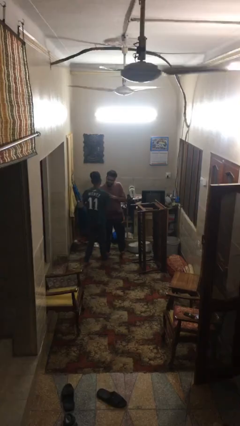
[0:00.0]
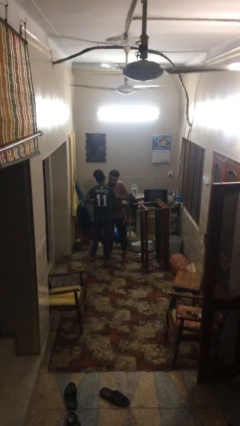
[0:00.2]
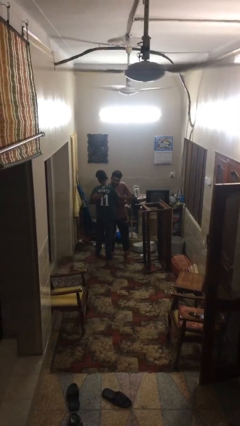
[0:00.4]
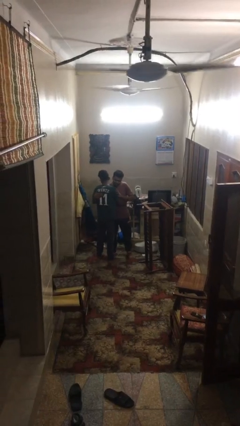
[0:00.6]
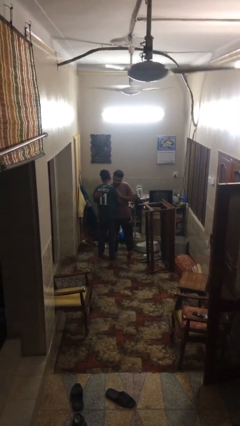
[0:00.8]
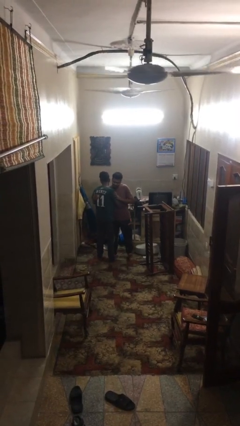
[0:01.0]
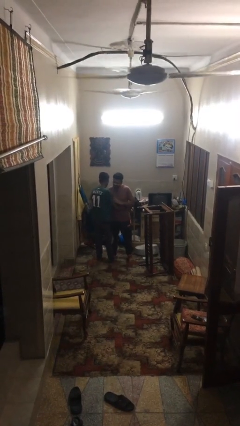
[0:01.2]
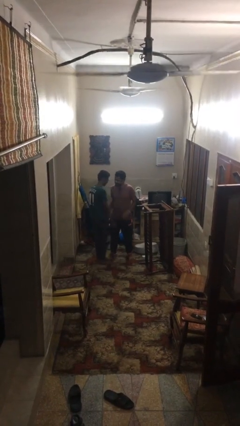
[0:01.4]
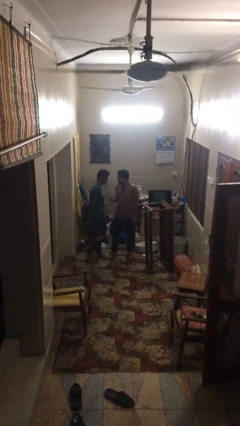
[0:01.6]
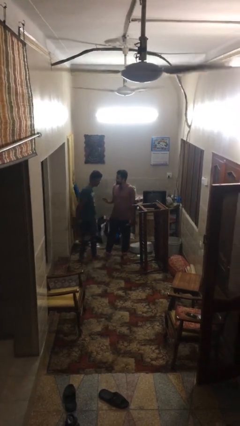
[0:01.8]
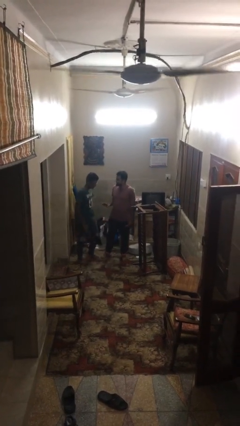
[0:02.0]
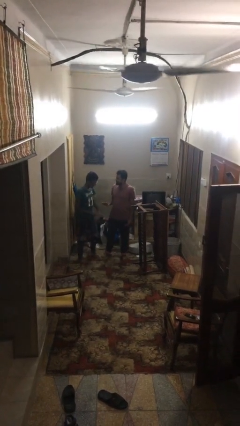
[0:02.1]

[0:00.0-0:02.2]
person embraces person

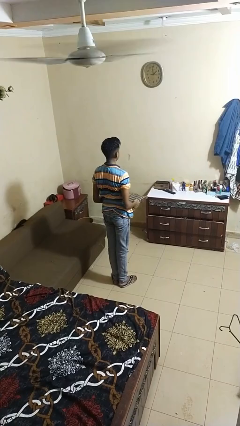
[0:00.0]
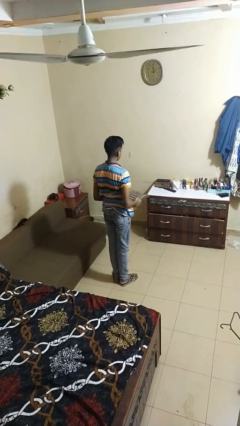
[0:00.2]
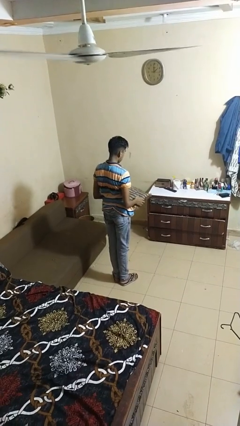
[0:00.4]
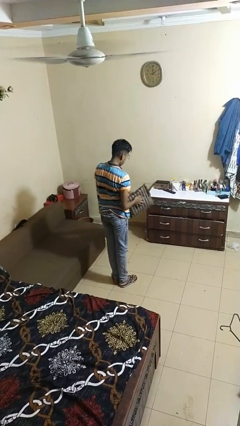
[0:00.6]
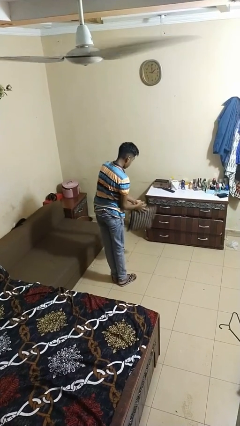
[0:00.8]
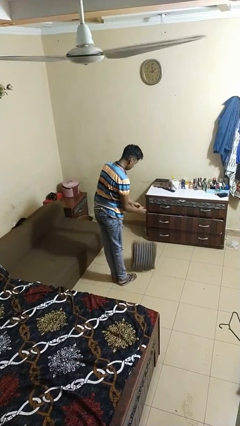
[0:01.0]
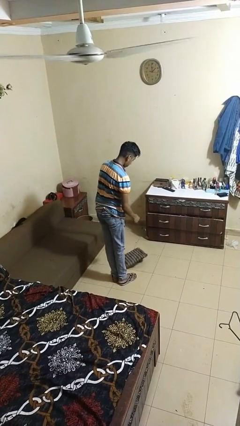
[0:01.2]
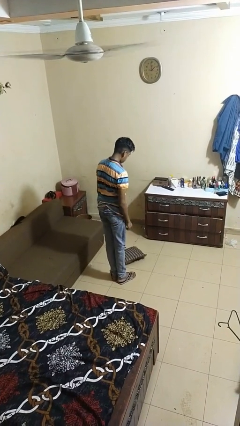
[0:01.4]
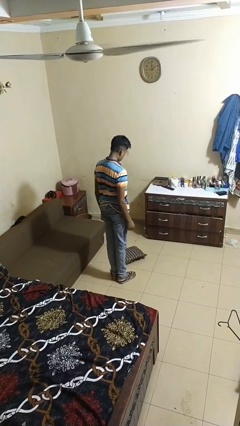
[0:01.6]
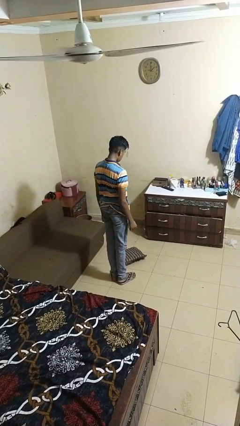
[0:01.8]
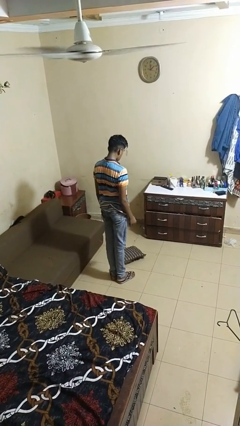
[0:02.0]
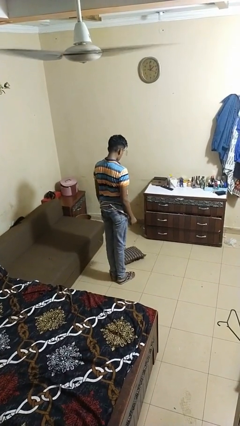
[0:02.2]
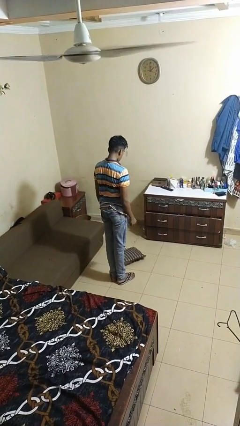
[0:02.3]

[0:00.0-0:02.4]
person drops object

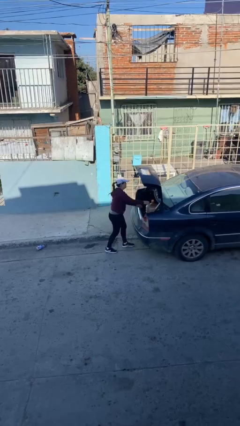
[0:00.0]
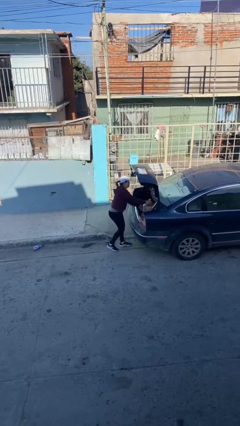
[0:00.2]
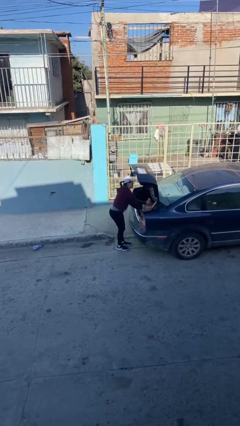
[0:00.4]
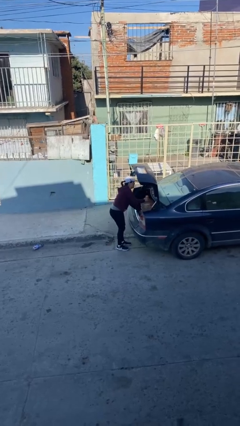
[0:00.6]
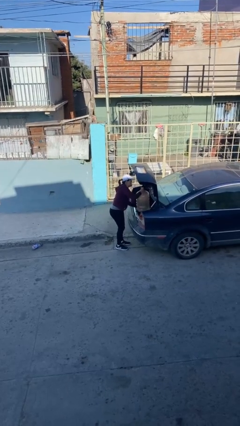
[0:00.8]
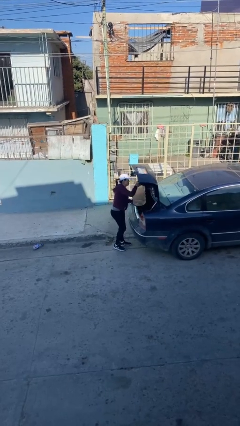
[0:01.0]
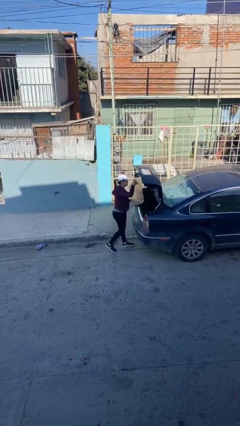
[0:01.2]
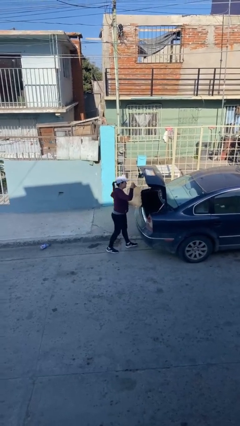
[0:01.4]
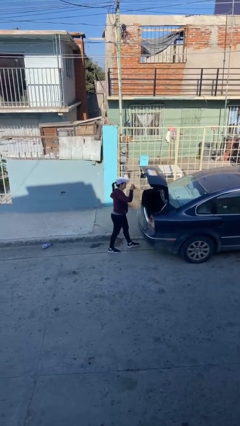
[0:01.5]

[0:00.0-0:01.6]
person unloads car

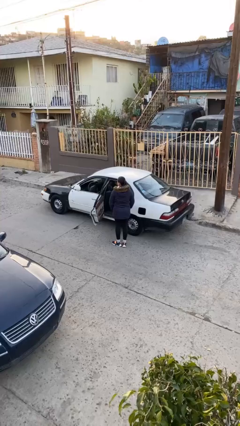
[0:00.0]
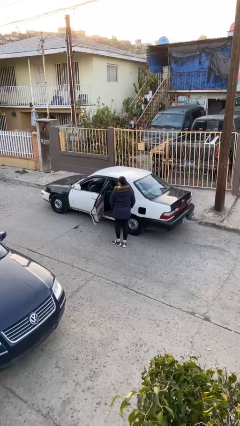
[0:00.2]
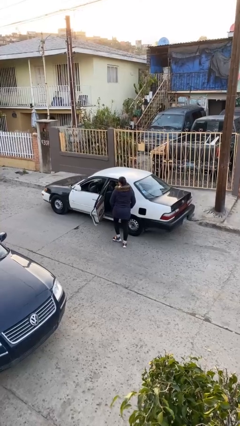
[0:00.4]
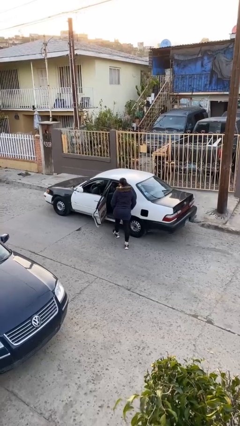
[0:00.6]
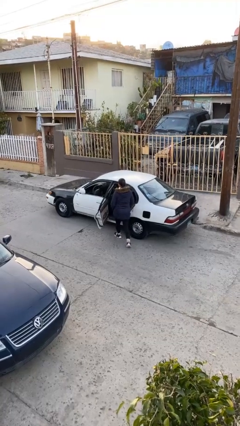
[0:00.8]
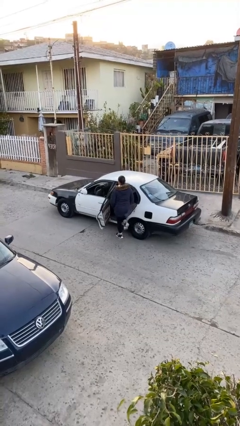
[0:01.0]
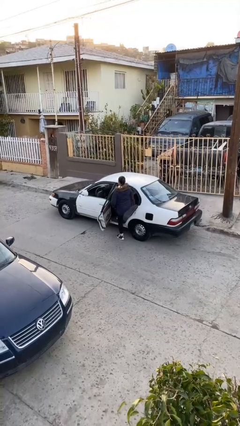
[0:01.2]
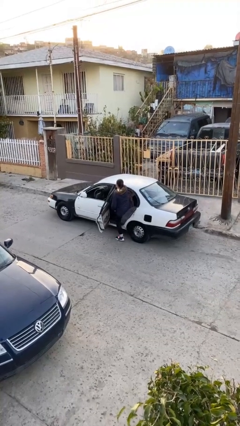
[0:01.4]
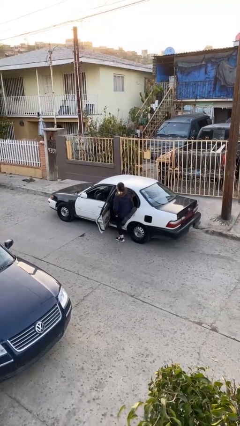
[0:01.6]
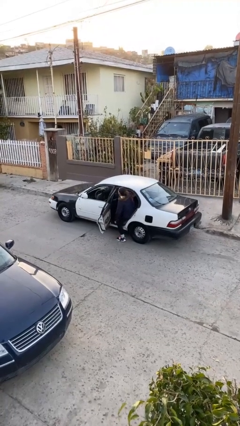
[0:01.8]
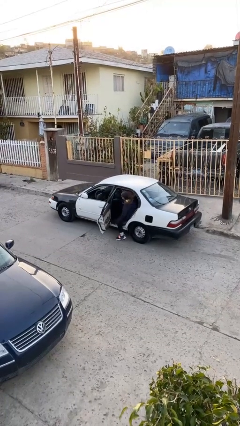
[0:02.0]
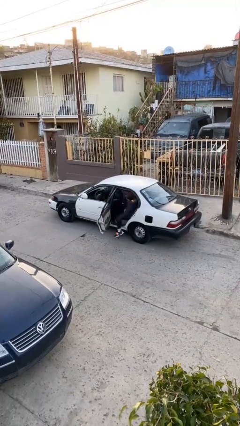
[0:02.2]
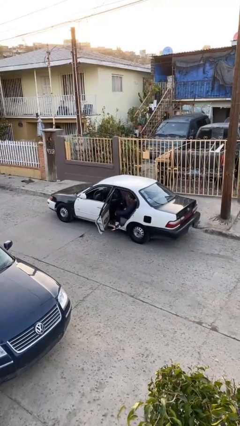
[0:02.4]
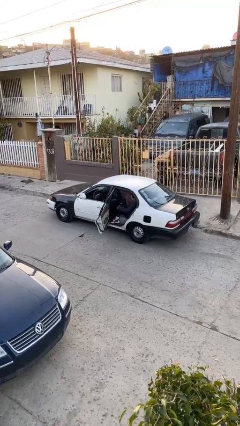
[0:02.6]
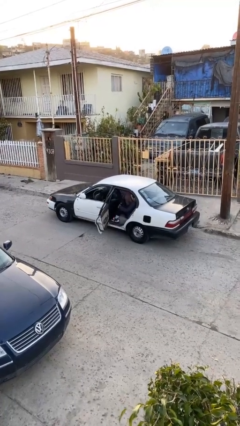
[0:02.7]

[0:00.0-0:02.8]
person enters car

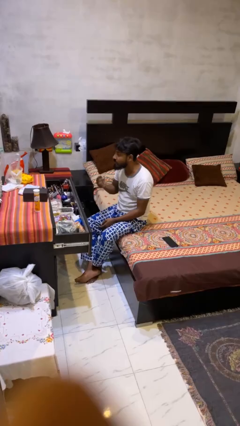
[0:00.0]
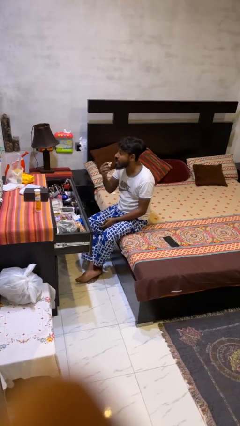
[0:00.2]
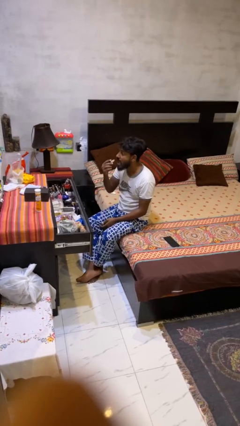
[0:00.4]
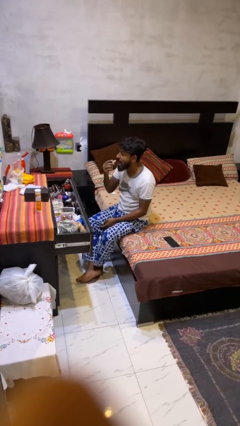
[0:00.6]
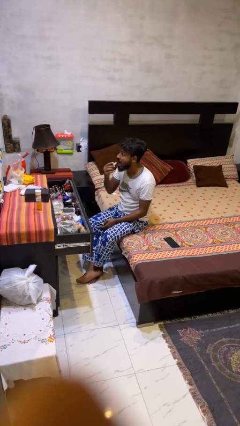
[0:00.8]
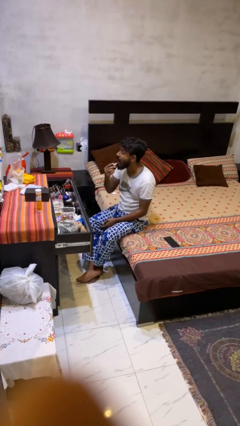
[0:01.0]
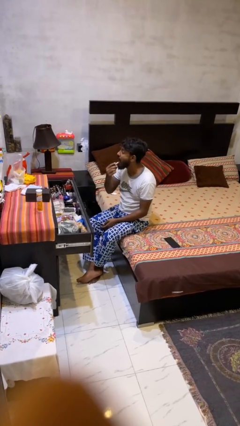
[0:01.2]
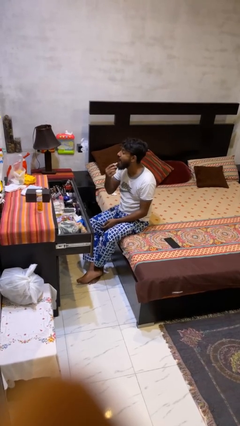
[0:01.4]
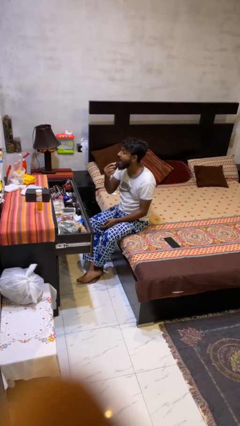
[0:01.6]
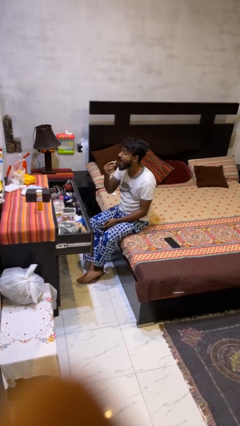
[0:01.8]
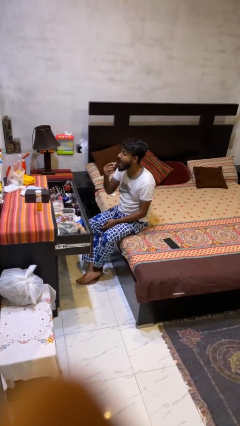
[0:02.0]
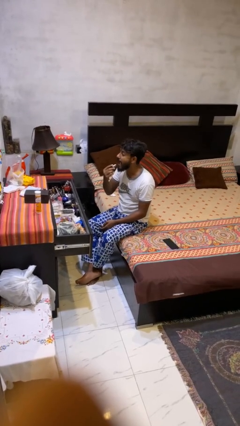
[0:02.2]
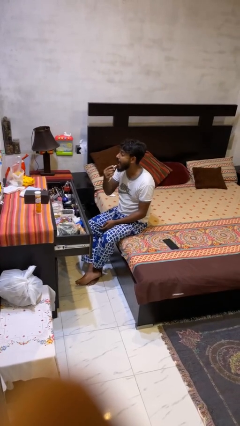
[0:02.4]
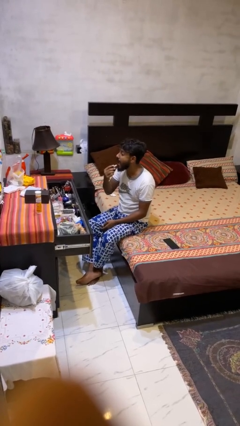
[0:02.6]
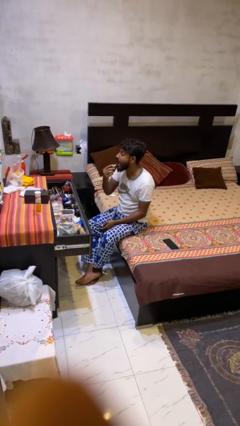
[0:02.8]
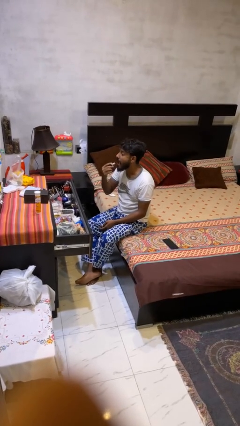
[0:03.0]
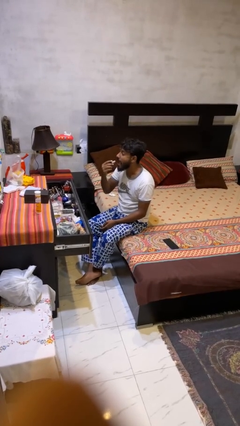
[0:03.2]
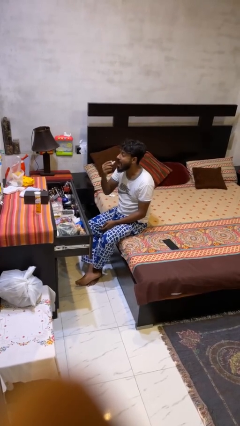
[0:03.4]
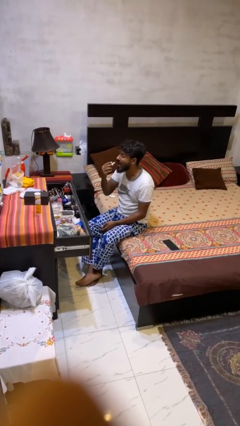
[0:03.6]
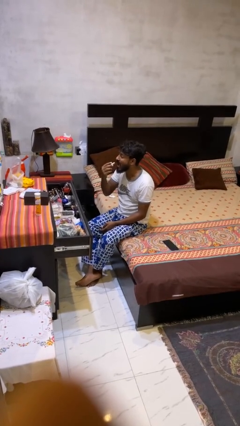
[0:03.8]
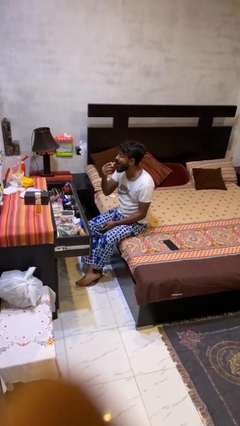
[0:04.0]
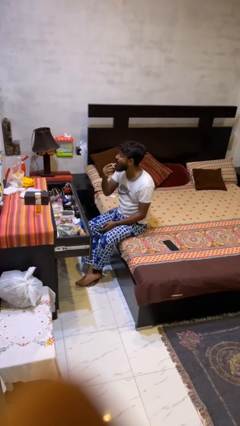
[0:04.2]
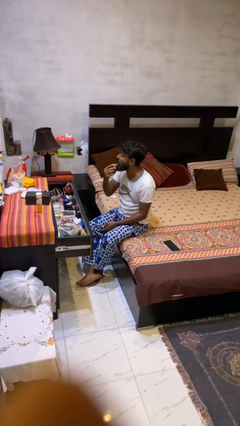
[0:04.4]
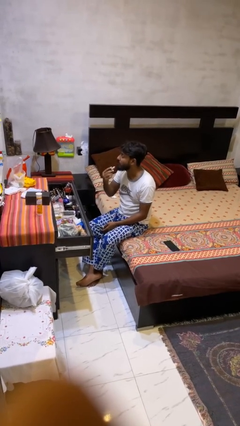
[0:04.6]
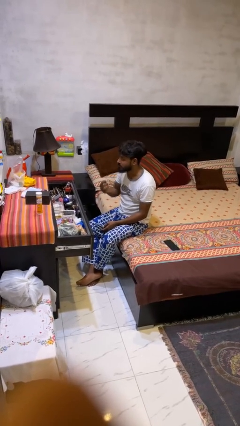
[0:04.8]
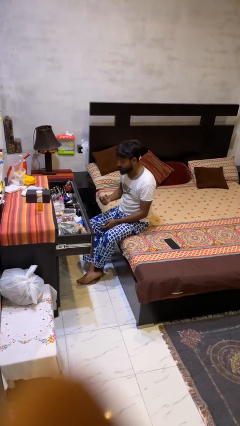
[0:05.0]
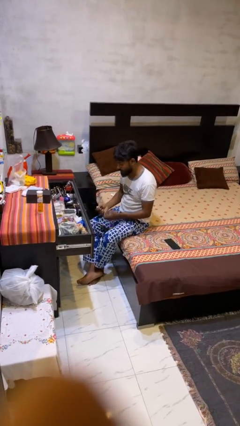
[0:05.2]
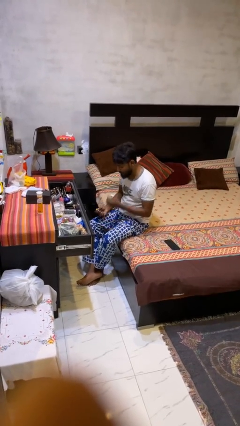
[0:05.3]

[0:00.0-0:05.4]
person applies lip makeup

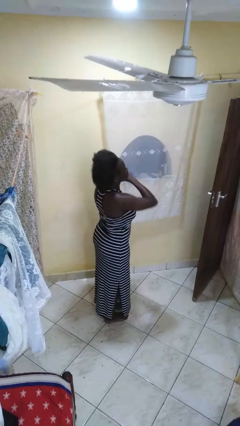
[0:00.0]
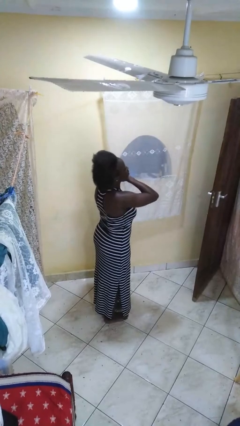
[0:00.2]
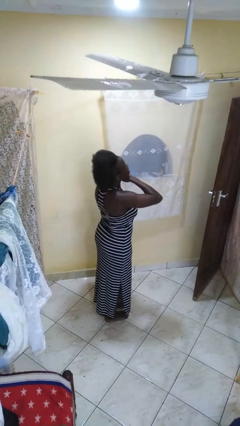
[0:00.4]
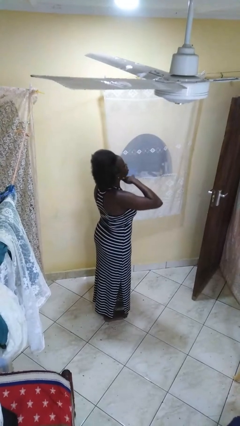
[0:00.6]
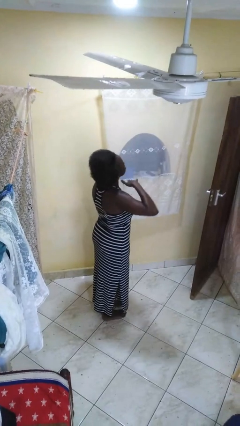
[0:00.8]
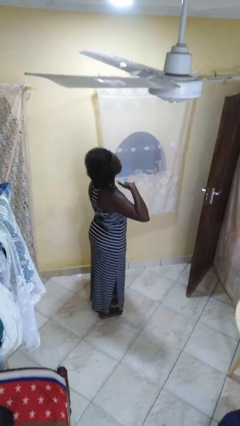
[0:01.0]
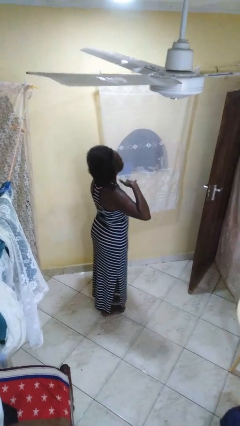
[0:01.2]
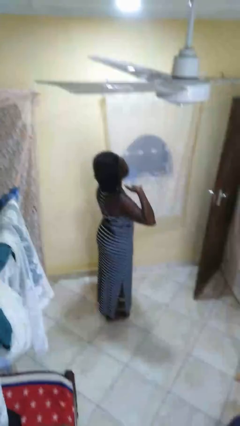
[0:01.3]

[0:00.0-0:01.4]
person gestures cut

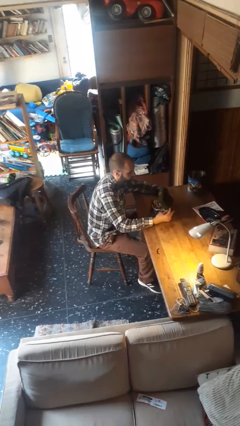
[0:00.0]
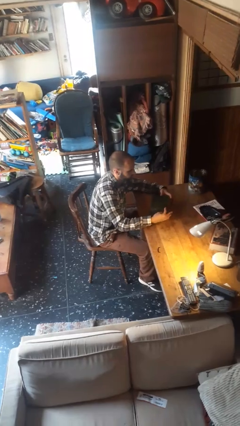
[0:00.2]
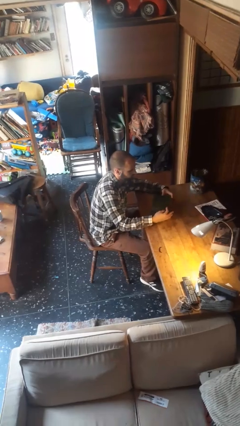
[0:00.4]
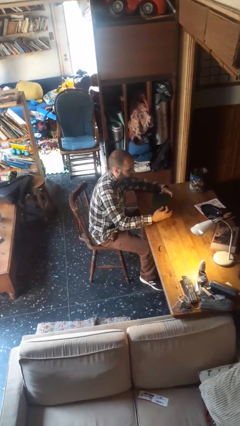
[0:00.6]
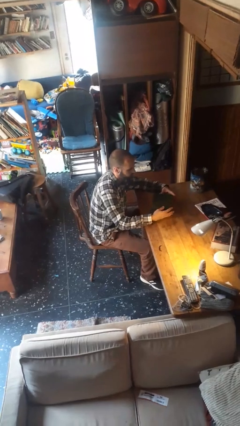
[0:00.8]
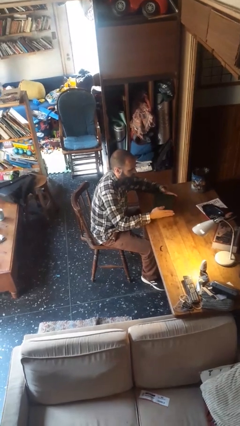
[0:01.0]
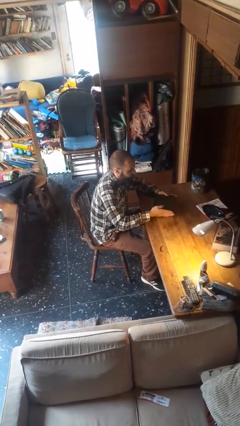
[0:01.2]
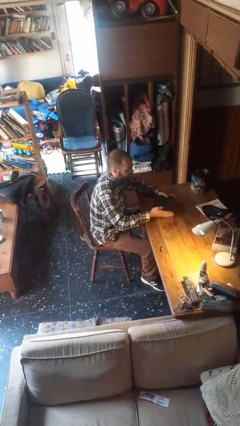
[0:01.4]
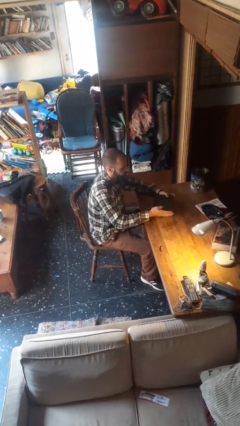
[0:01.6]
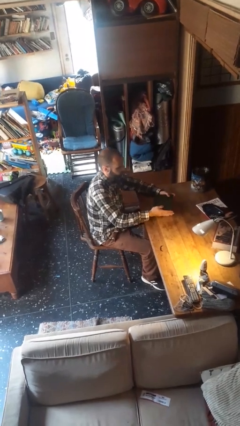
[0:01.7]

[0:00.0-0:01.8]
person closes jewelry box
